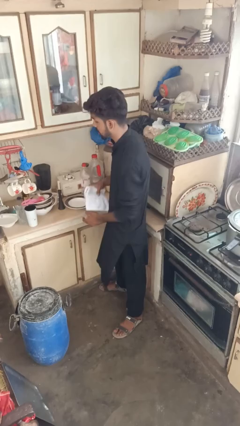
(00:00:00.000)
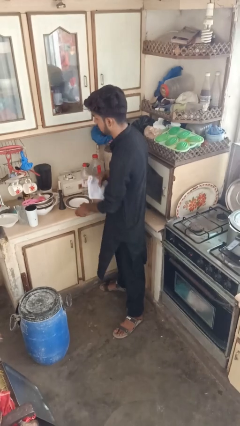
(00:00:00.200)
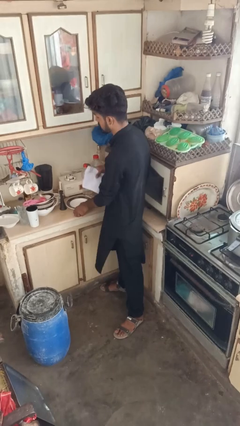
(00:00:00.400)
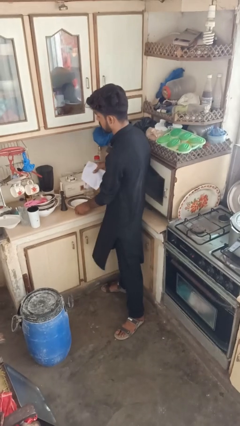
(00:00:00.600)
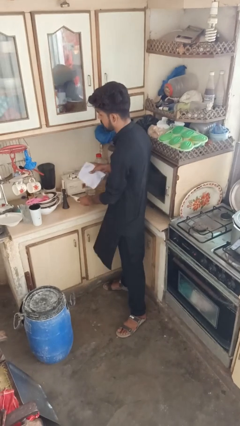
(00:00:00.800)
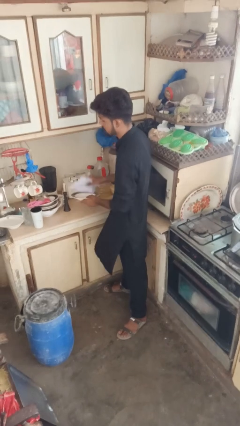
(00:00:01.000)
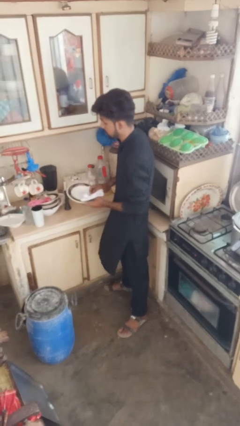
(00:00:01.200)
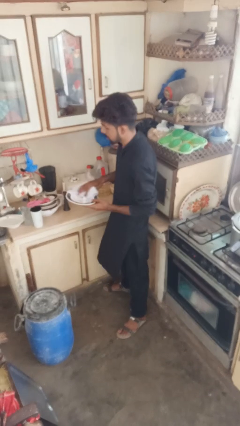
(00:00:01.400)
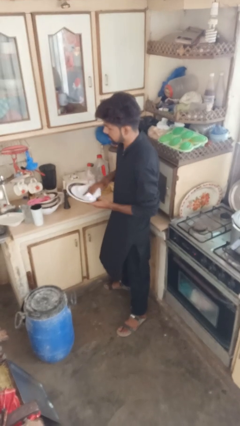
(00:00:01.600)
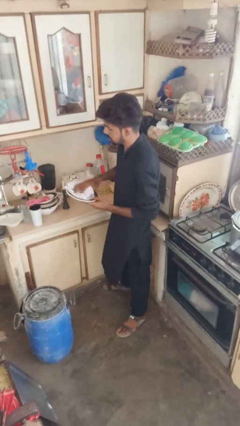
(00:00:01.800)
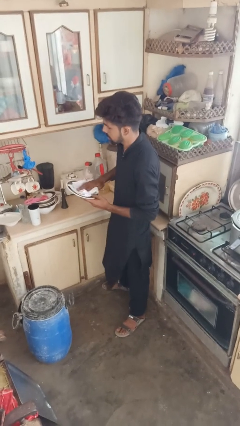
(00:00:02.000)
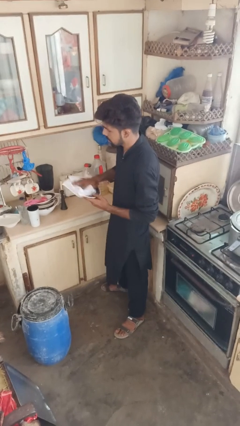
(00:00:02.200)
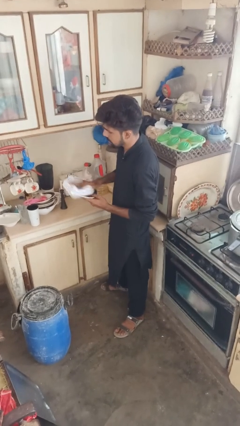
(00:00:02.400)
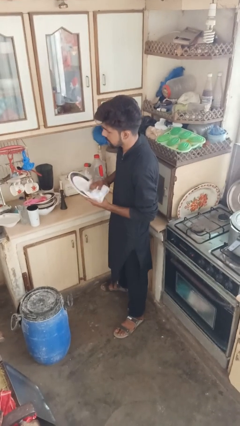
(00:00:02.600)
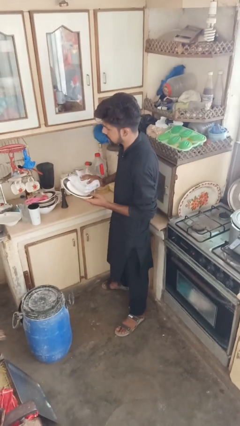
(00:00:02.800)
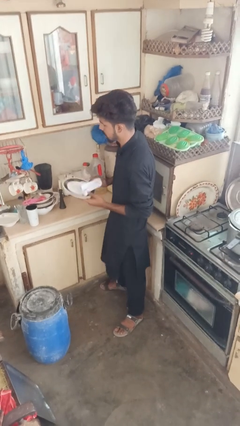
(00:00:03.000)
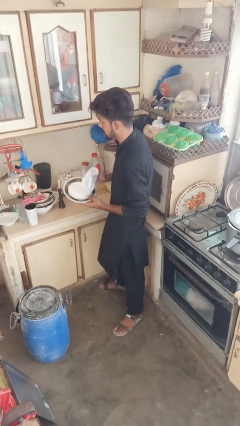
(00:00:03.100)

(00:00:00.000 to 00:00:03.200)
person dries dish

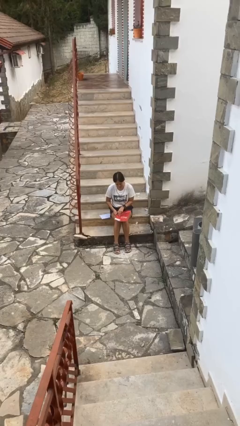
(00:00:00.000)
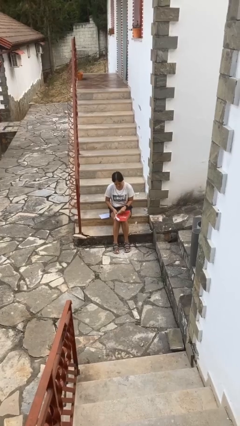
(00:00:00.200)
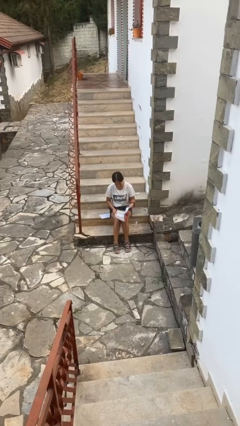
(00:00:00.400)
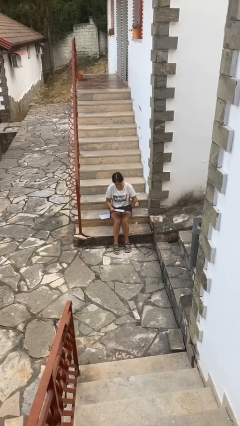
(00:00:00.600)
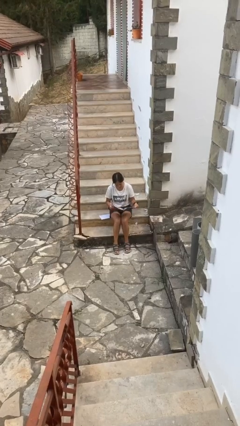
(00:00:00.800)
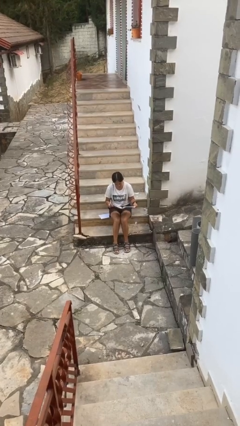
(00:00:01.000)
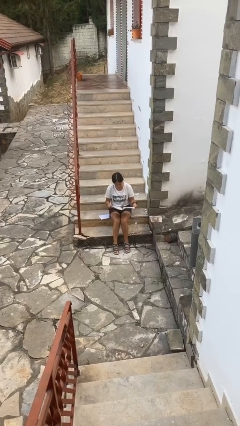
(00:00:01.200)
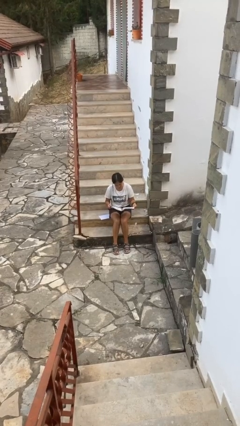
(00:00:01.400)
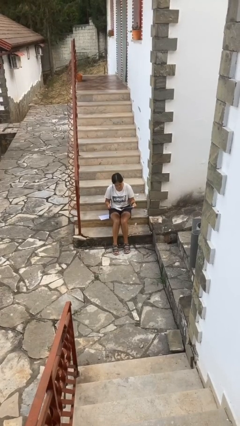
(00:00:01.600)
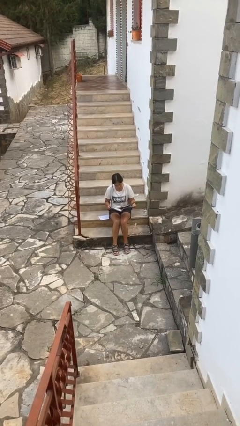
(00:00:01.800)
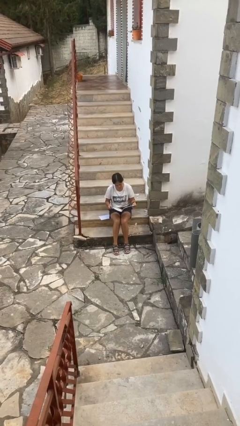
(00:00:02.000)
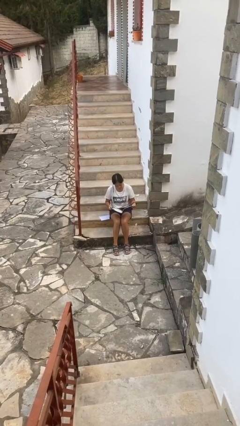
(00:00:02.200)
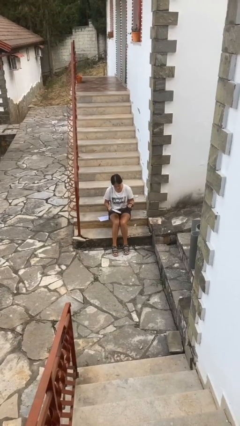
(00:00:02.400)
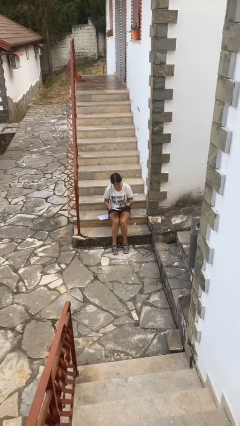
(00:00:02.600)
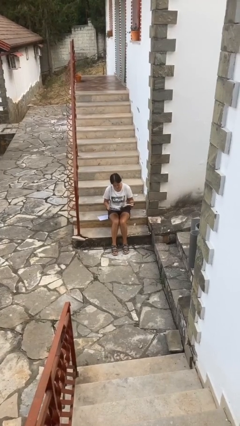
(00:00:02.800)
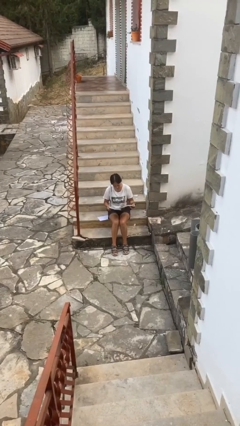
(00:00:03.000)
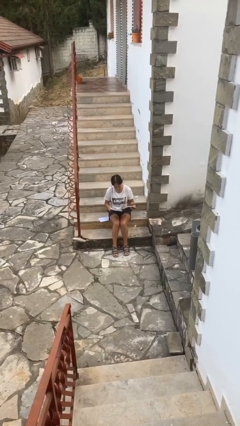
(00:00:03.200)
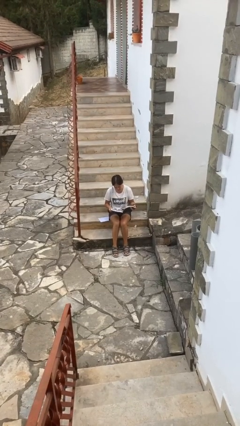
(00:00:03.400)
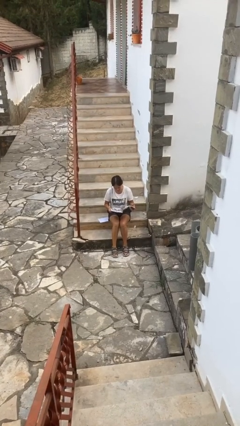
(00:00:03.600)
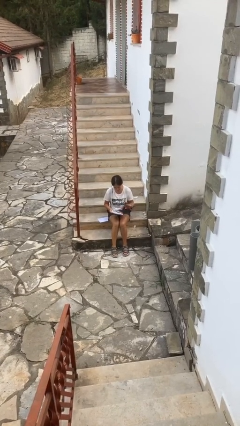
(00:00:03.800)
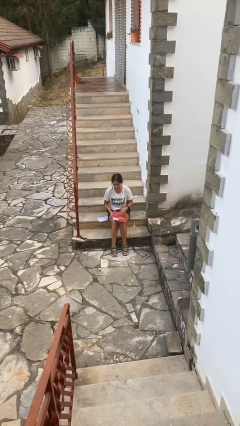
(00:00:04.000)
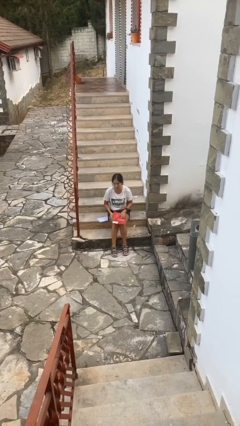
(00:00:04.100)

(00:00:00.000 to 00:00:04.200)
person reads magazine

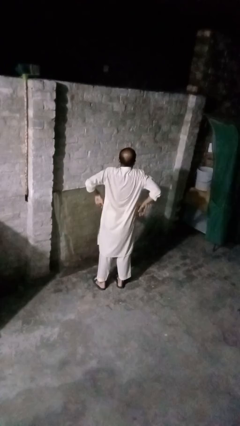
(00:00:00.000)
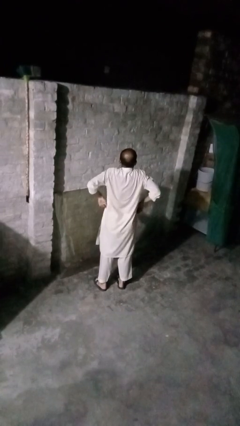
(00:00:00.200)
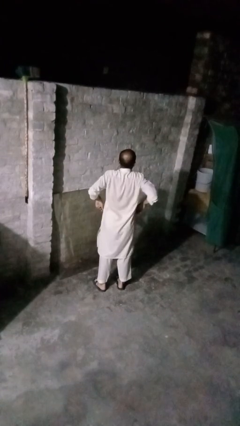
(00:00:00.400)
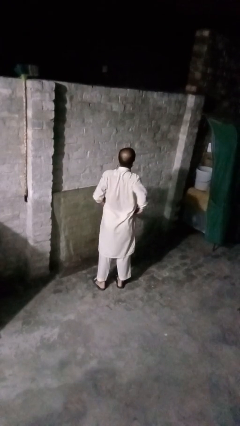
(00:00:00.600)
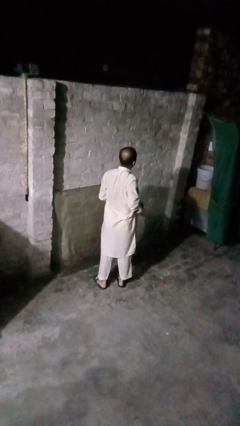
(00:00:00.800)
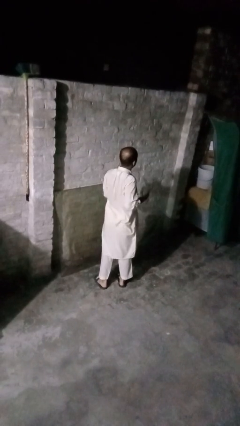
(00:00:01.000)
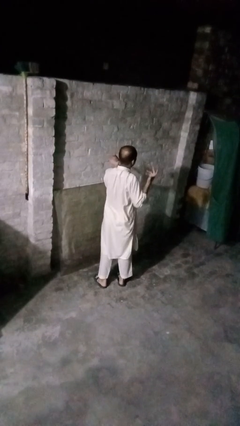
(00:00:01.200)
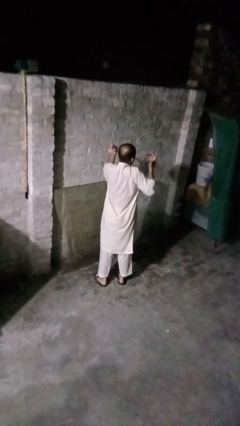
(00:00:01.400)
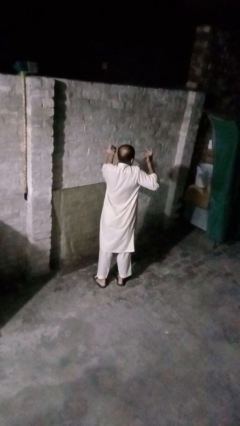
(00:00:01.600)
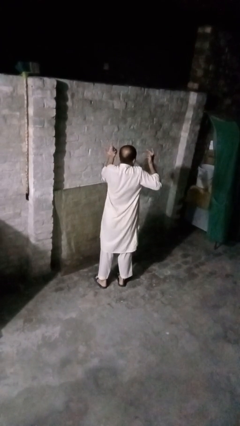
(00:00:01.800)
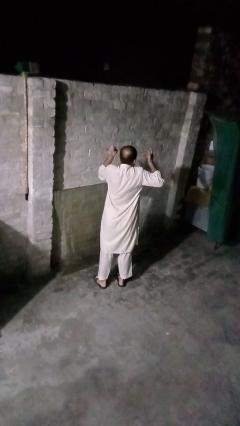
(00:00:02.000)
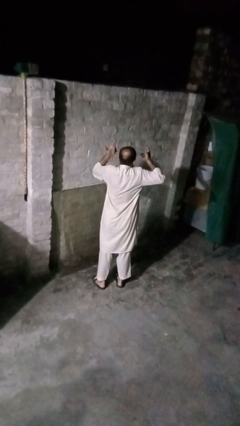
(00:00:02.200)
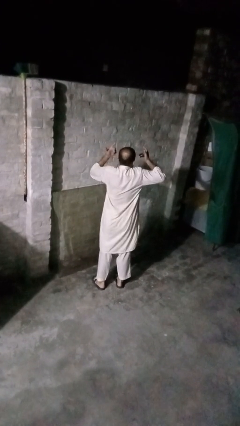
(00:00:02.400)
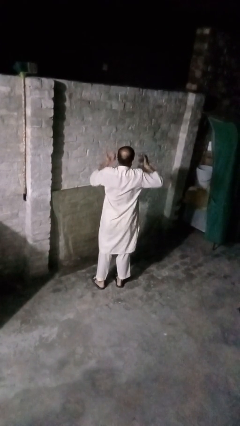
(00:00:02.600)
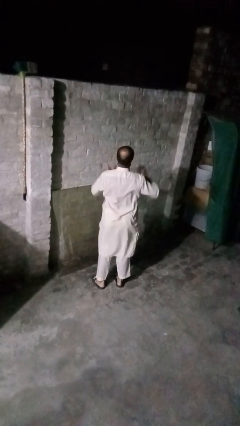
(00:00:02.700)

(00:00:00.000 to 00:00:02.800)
person shrugs

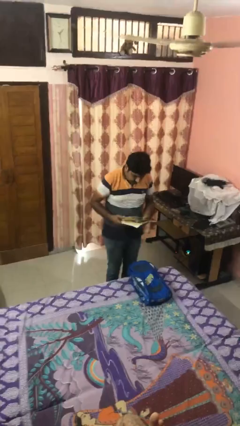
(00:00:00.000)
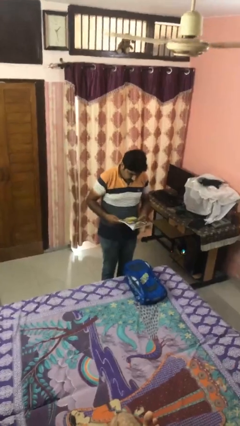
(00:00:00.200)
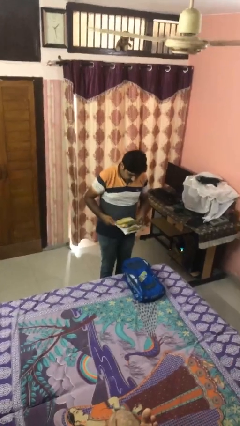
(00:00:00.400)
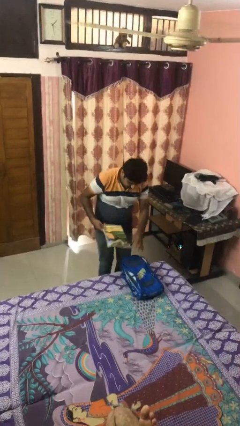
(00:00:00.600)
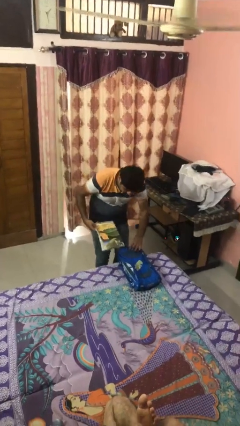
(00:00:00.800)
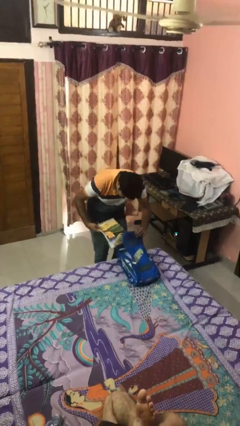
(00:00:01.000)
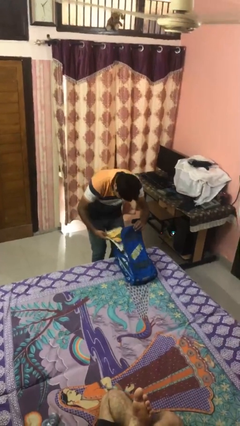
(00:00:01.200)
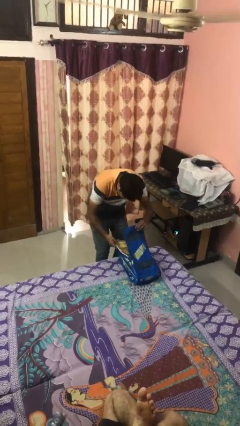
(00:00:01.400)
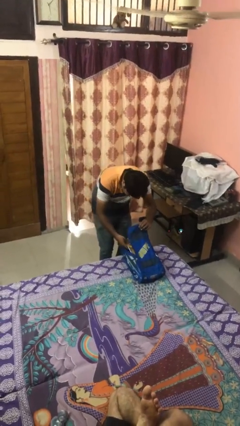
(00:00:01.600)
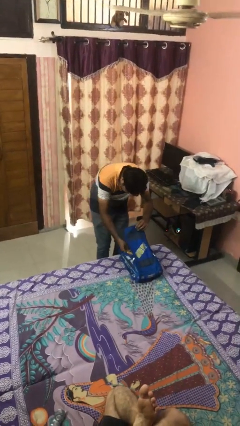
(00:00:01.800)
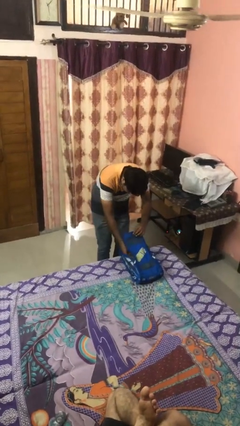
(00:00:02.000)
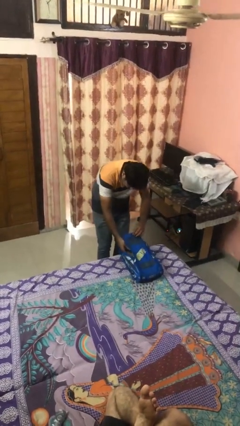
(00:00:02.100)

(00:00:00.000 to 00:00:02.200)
person puts object into backpack

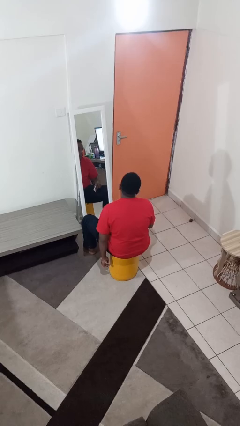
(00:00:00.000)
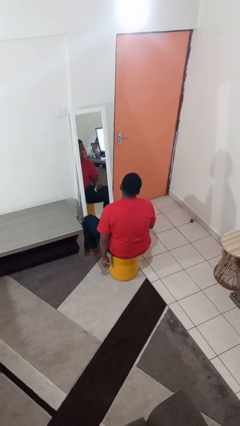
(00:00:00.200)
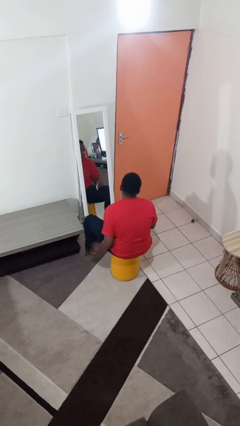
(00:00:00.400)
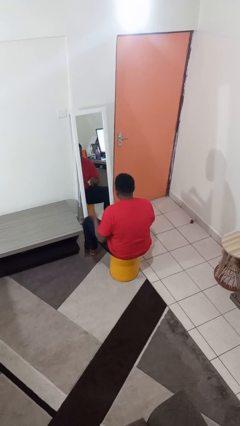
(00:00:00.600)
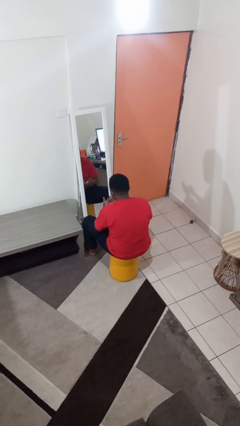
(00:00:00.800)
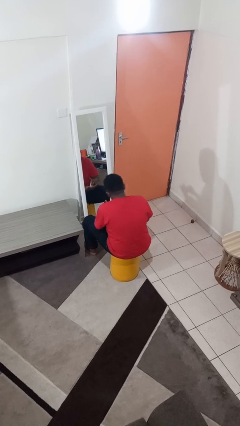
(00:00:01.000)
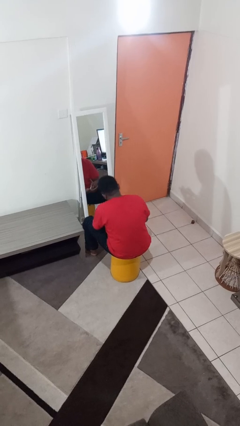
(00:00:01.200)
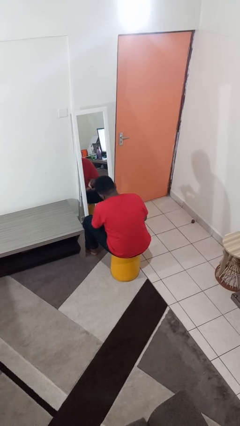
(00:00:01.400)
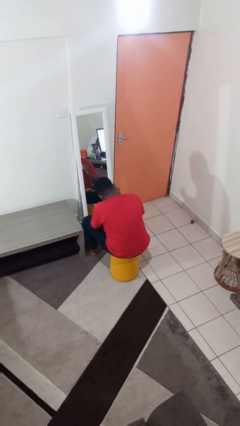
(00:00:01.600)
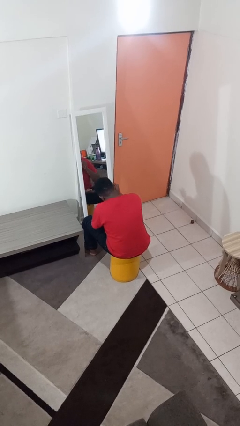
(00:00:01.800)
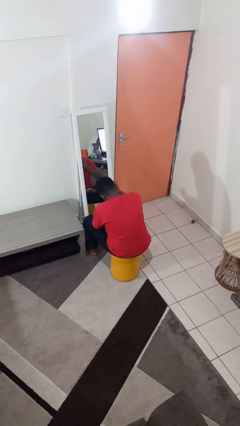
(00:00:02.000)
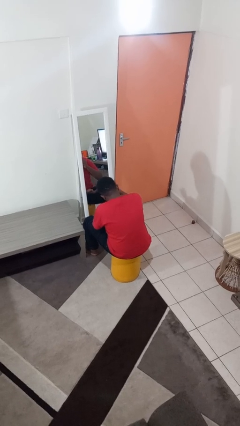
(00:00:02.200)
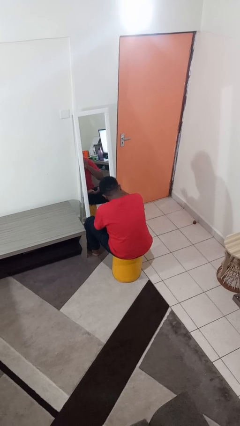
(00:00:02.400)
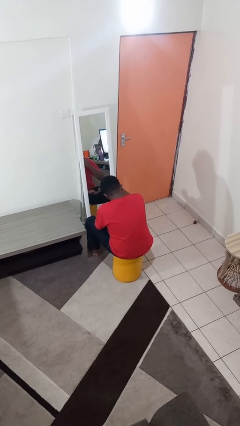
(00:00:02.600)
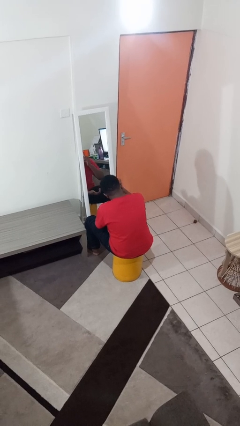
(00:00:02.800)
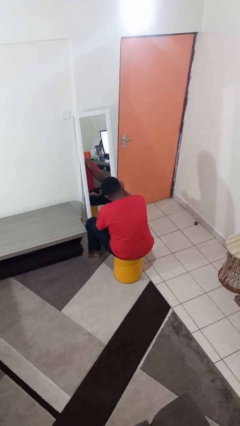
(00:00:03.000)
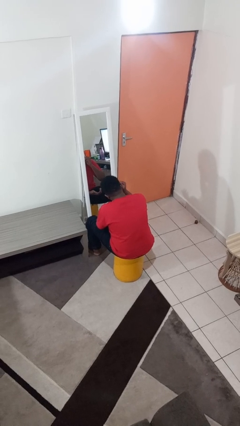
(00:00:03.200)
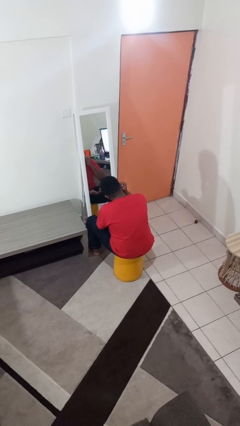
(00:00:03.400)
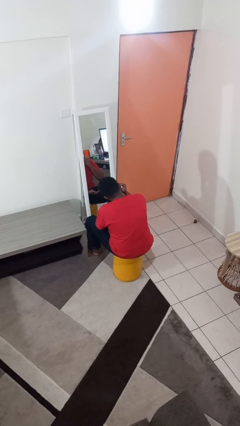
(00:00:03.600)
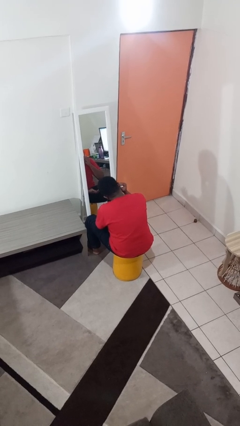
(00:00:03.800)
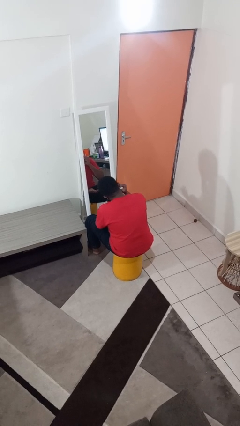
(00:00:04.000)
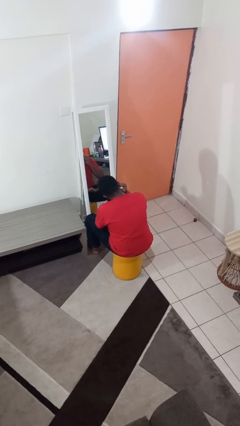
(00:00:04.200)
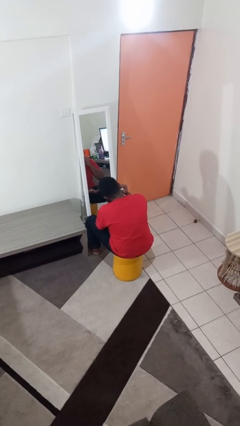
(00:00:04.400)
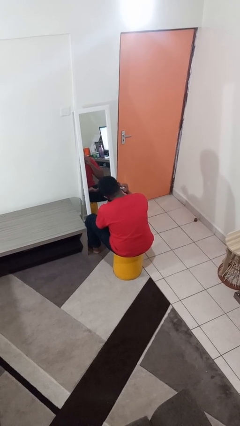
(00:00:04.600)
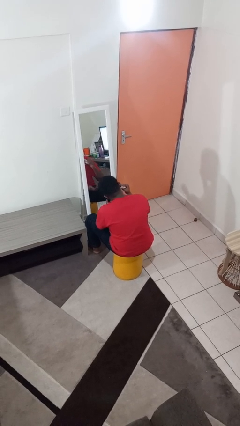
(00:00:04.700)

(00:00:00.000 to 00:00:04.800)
person applies foundation makeup

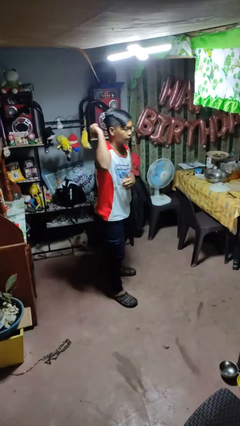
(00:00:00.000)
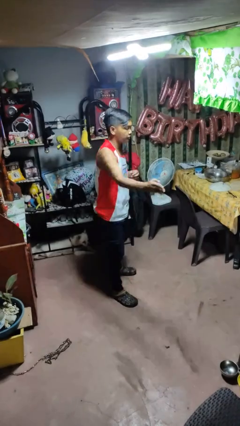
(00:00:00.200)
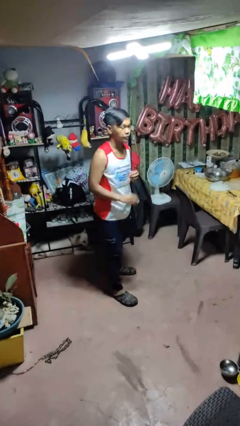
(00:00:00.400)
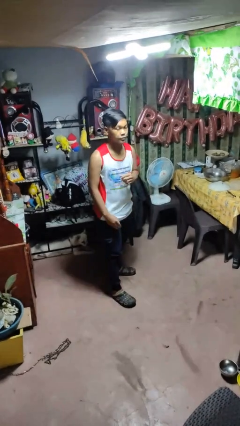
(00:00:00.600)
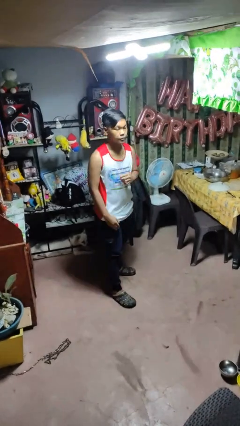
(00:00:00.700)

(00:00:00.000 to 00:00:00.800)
person karate chop
